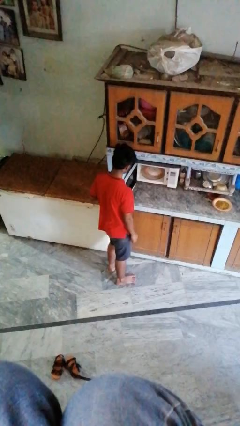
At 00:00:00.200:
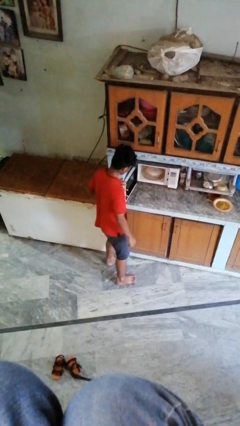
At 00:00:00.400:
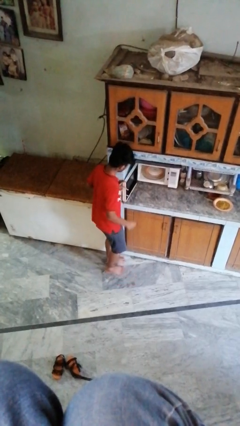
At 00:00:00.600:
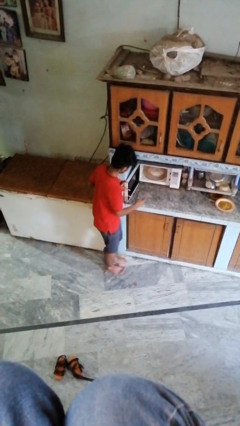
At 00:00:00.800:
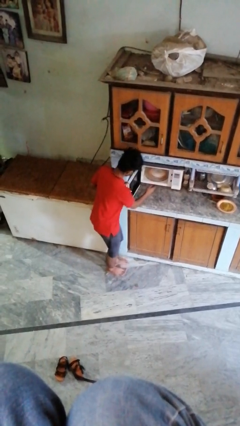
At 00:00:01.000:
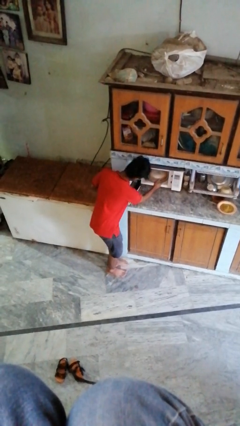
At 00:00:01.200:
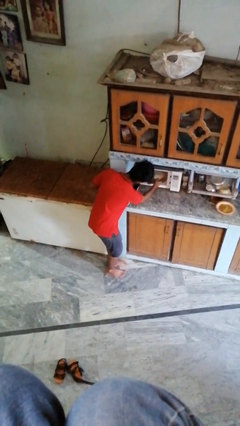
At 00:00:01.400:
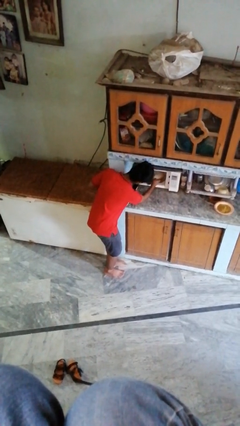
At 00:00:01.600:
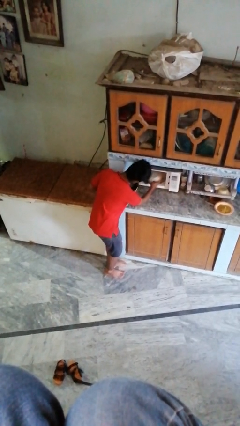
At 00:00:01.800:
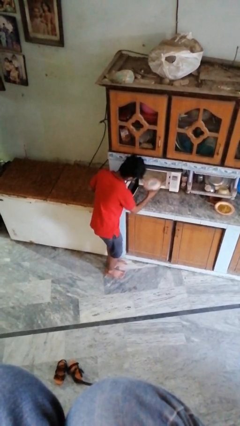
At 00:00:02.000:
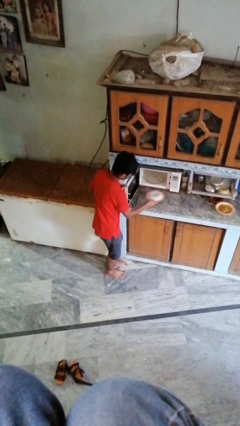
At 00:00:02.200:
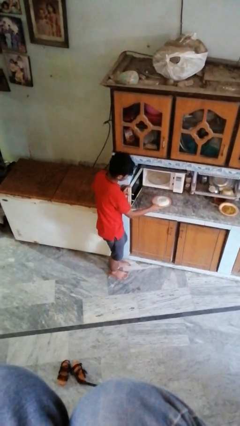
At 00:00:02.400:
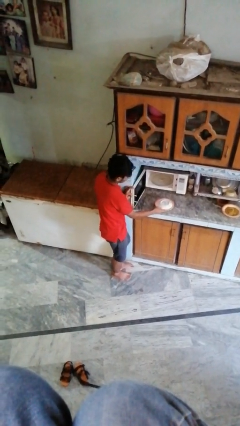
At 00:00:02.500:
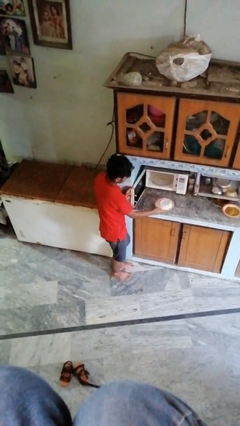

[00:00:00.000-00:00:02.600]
person takes object from oven

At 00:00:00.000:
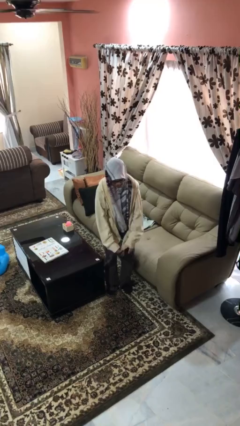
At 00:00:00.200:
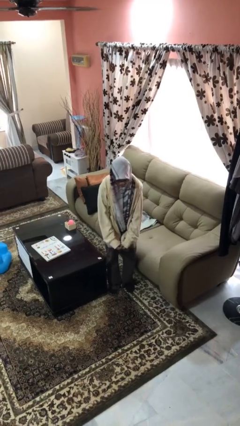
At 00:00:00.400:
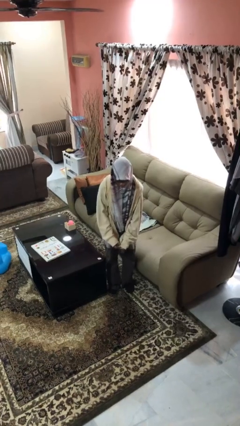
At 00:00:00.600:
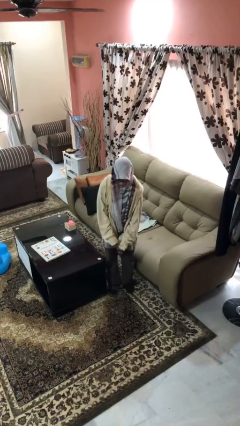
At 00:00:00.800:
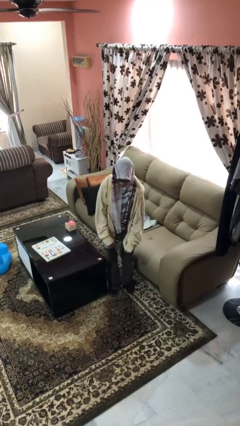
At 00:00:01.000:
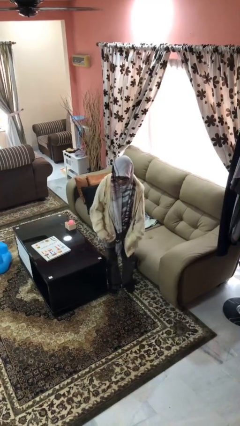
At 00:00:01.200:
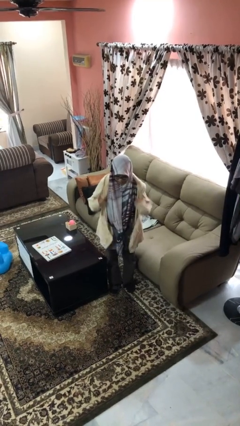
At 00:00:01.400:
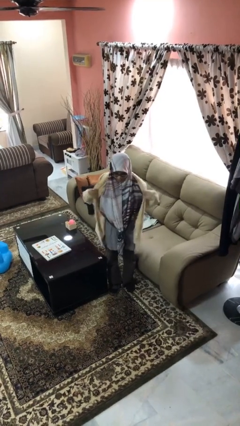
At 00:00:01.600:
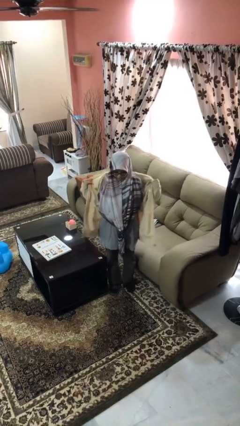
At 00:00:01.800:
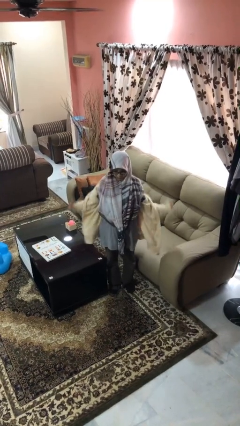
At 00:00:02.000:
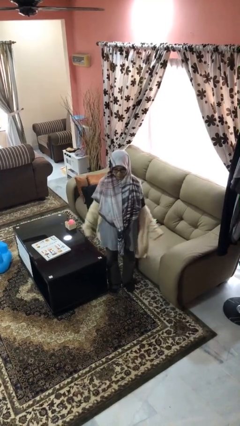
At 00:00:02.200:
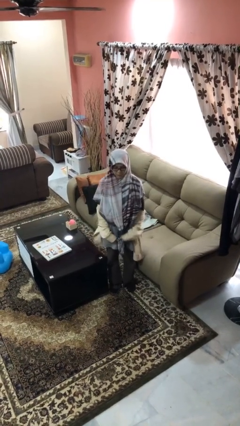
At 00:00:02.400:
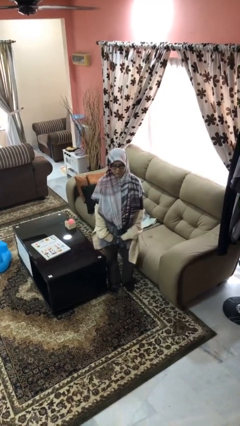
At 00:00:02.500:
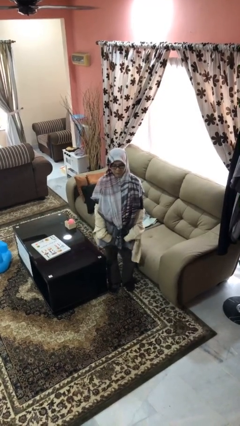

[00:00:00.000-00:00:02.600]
person takes off jacket

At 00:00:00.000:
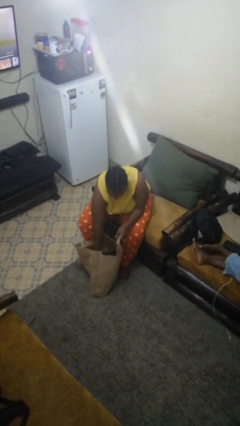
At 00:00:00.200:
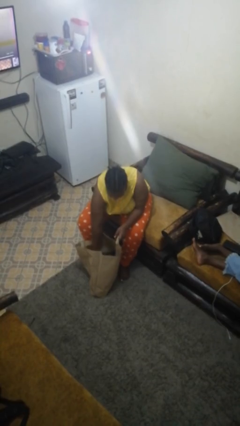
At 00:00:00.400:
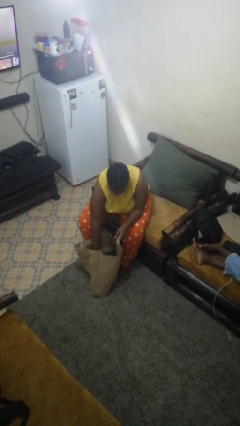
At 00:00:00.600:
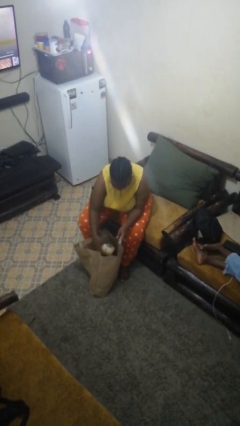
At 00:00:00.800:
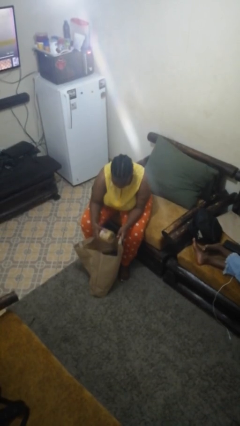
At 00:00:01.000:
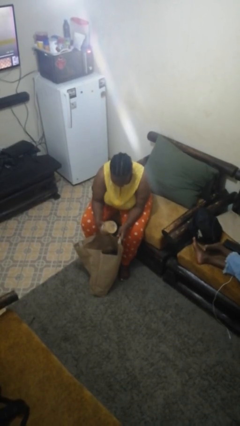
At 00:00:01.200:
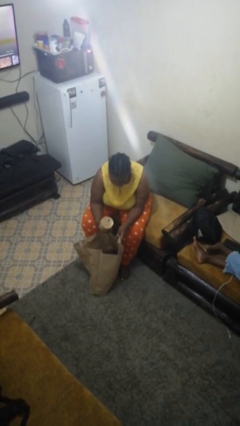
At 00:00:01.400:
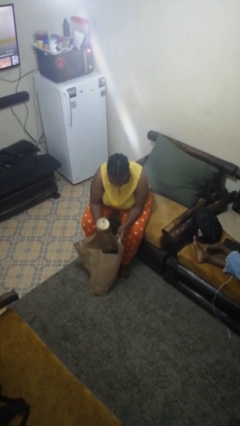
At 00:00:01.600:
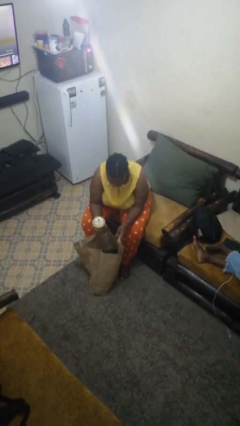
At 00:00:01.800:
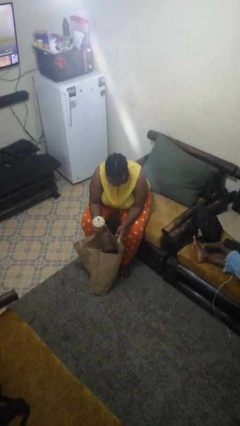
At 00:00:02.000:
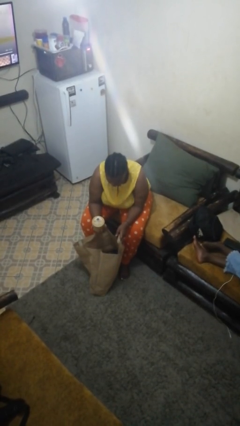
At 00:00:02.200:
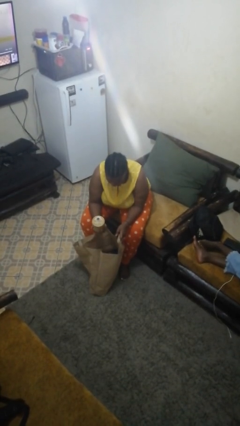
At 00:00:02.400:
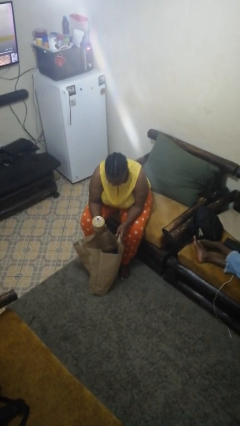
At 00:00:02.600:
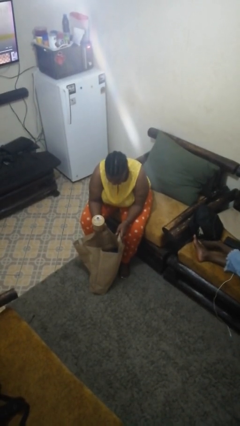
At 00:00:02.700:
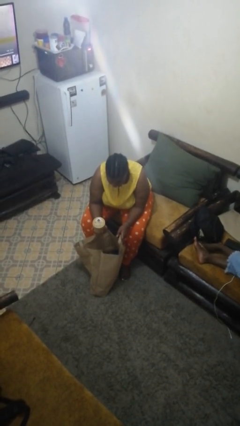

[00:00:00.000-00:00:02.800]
person takes object from bag

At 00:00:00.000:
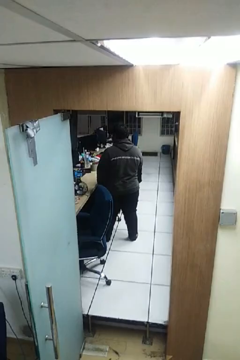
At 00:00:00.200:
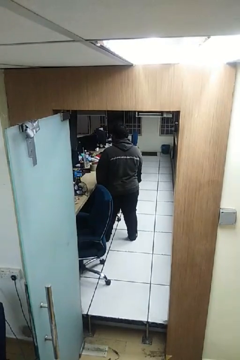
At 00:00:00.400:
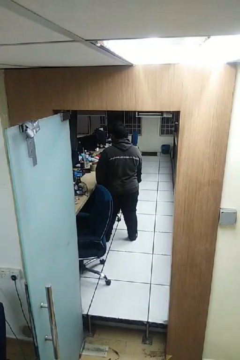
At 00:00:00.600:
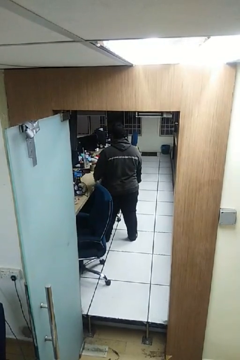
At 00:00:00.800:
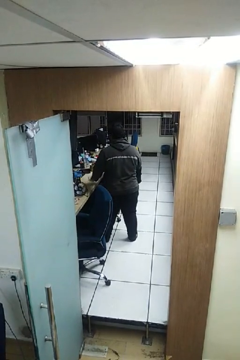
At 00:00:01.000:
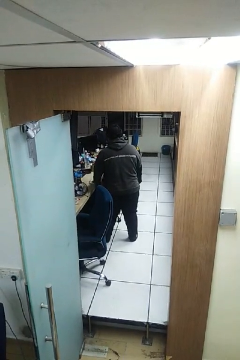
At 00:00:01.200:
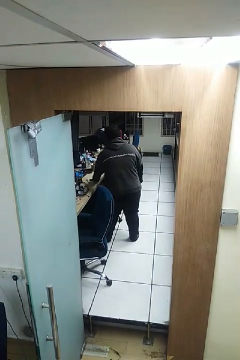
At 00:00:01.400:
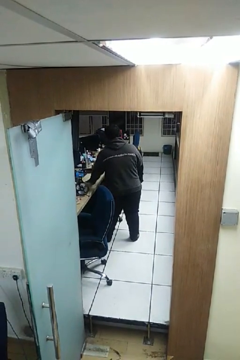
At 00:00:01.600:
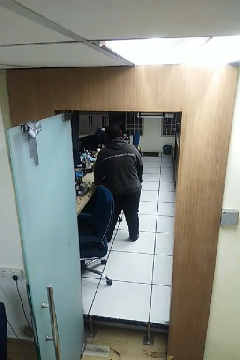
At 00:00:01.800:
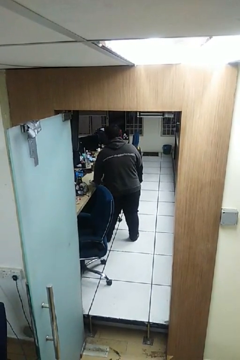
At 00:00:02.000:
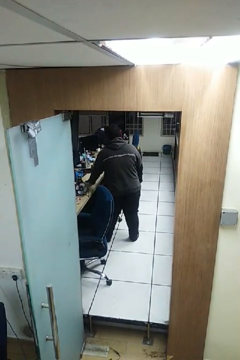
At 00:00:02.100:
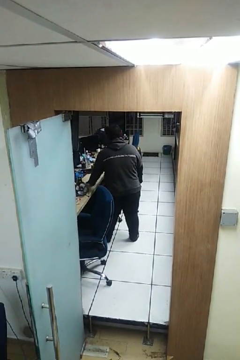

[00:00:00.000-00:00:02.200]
person cleans table with rag

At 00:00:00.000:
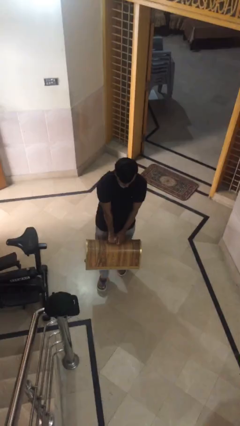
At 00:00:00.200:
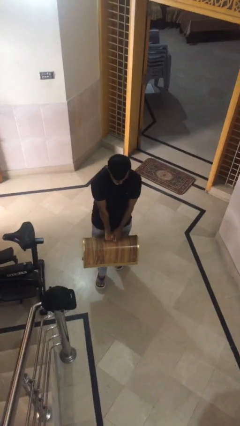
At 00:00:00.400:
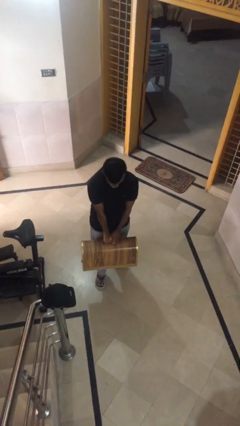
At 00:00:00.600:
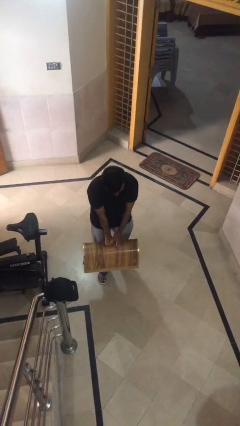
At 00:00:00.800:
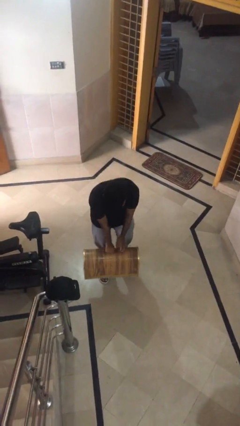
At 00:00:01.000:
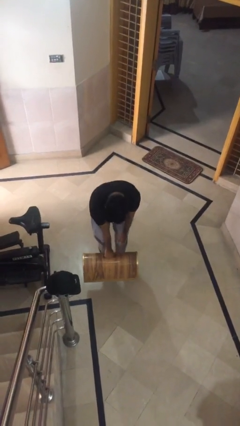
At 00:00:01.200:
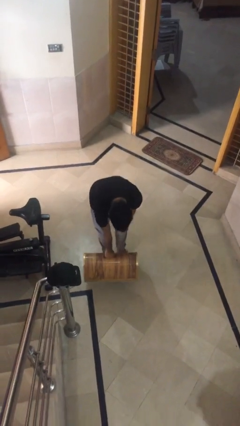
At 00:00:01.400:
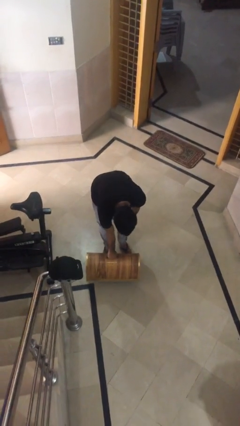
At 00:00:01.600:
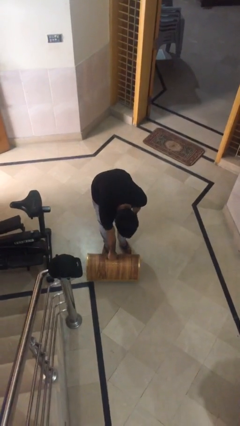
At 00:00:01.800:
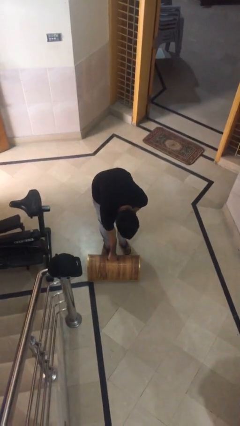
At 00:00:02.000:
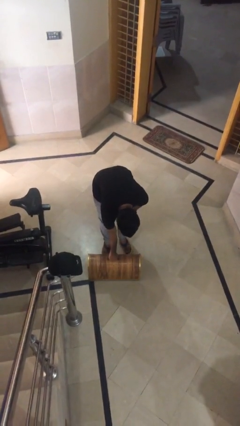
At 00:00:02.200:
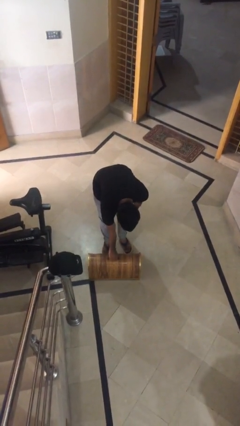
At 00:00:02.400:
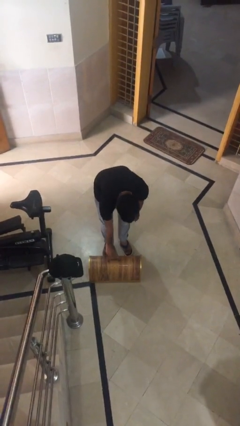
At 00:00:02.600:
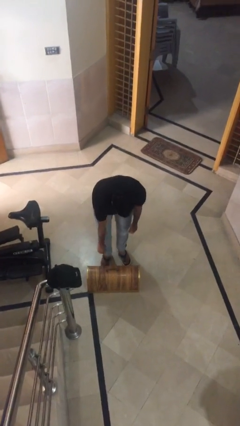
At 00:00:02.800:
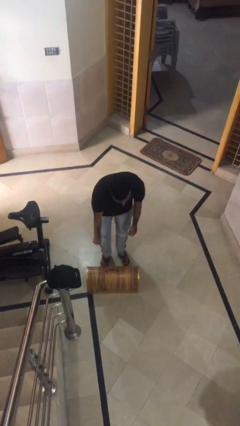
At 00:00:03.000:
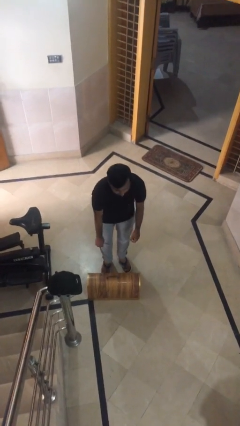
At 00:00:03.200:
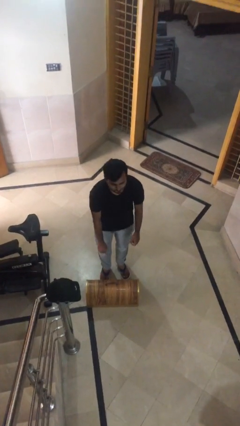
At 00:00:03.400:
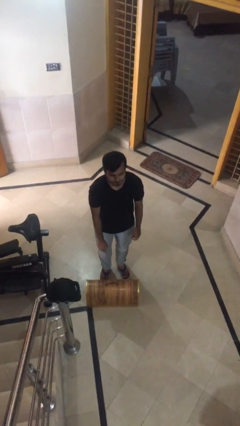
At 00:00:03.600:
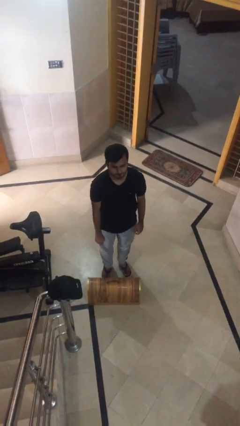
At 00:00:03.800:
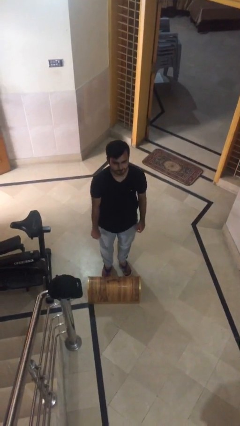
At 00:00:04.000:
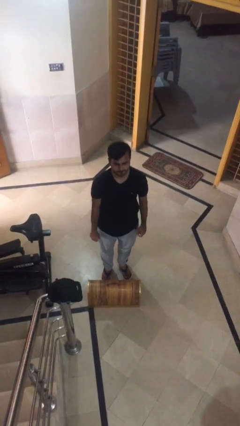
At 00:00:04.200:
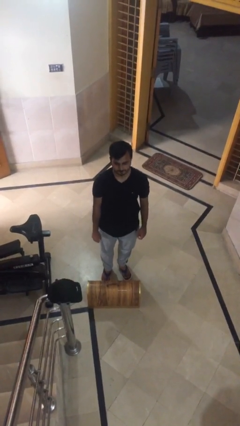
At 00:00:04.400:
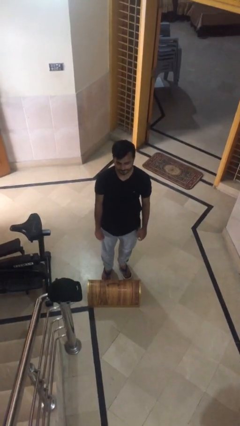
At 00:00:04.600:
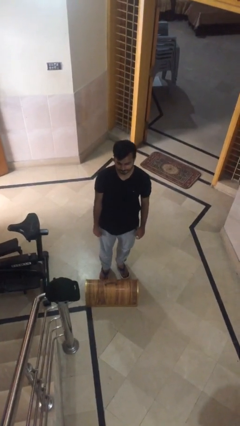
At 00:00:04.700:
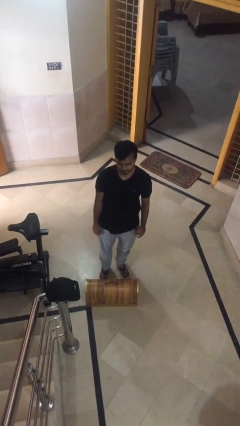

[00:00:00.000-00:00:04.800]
person puts down object on floor

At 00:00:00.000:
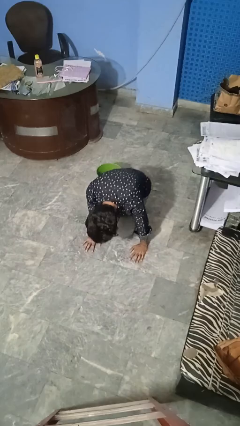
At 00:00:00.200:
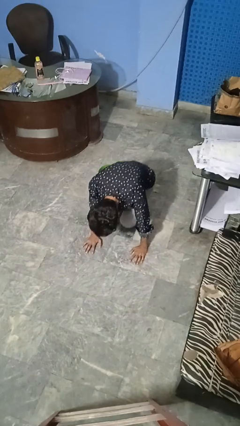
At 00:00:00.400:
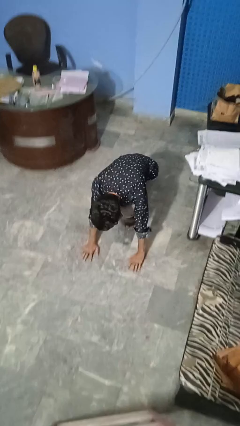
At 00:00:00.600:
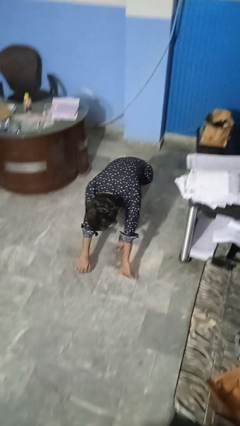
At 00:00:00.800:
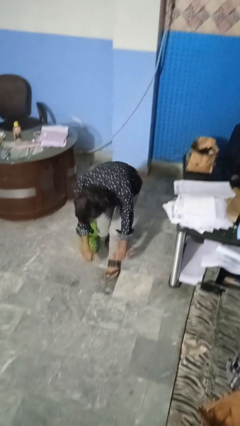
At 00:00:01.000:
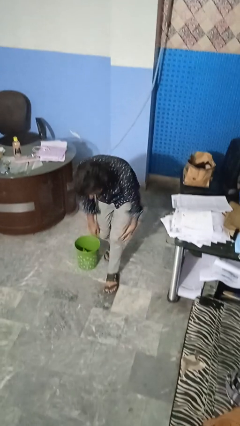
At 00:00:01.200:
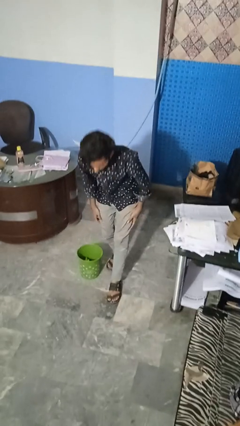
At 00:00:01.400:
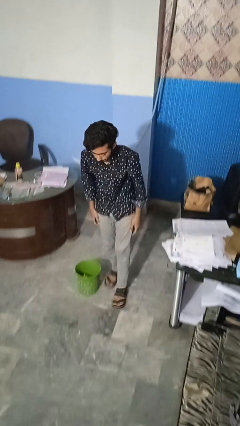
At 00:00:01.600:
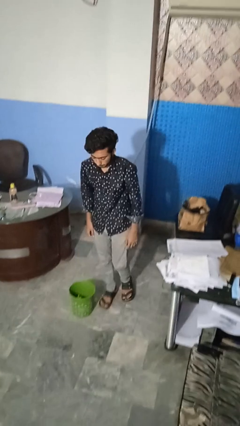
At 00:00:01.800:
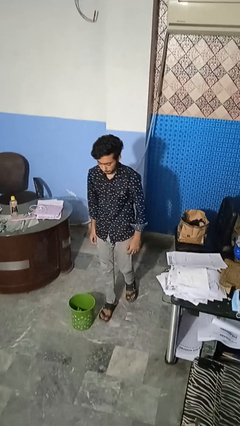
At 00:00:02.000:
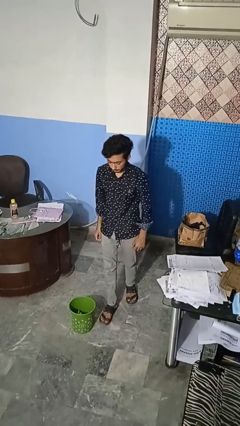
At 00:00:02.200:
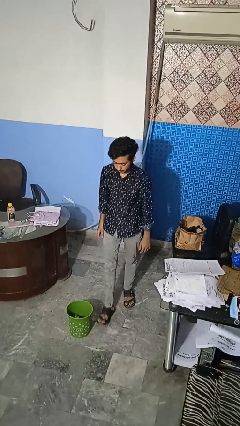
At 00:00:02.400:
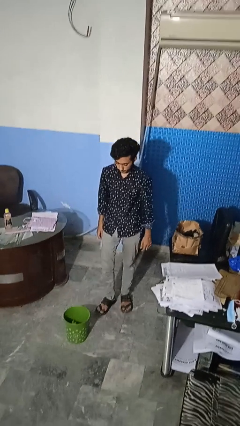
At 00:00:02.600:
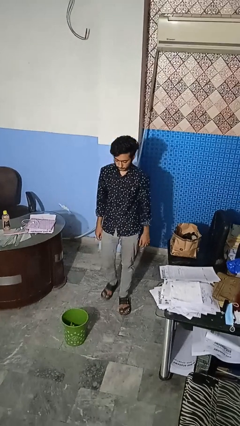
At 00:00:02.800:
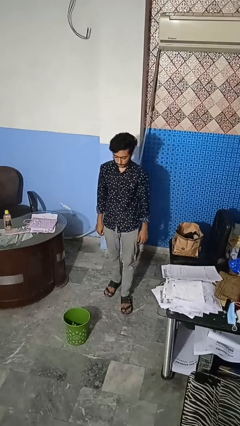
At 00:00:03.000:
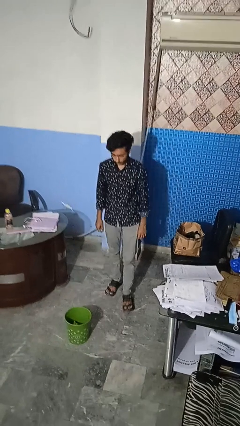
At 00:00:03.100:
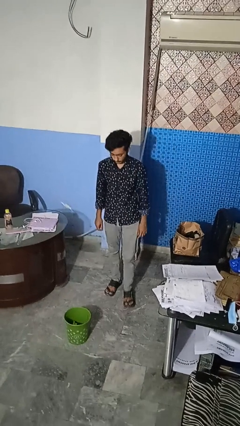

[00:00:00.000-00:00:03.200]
person stands up from floor
